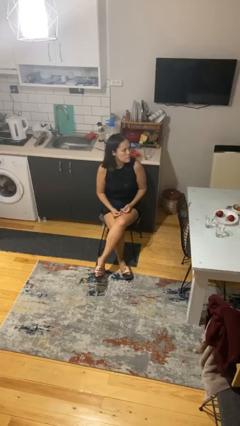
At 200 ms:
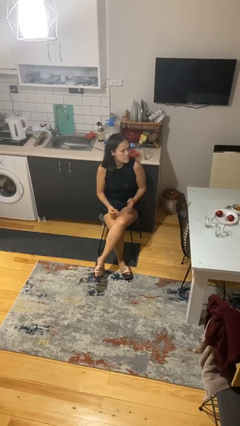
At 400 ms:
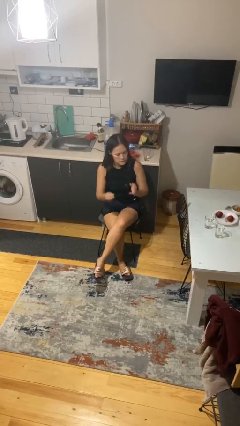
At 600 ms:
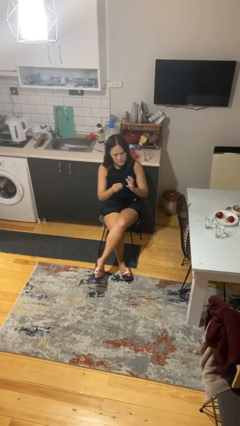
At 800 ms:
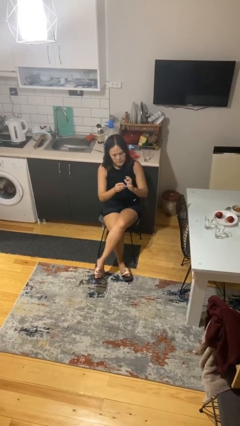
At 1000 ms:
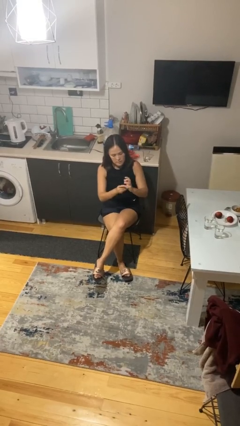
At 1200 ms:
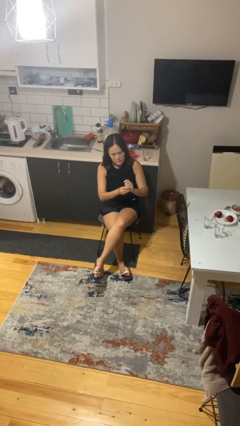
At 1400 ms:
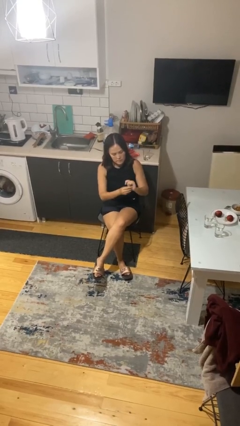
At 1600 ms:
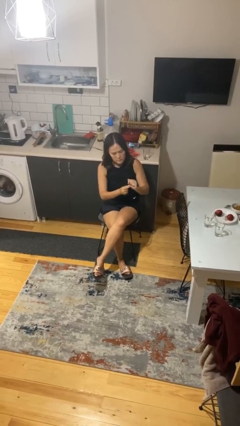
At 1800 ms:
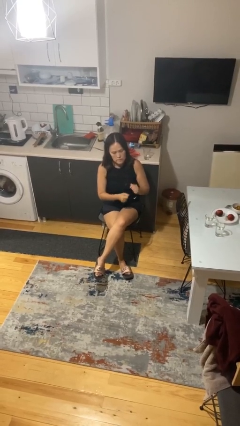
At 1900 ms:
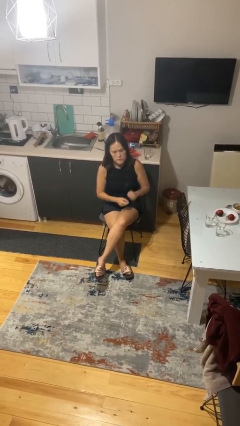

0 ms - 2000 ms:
person puts on ring

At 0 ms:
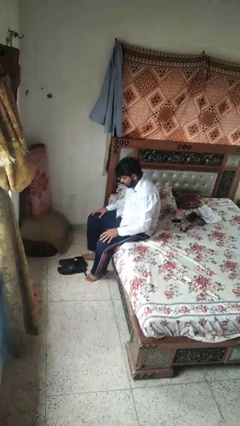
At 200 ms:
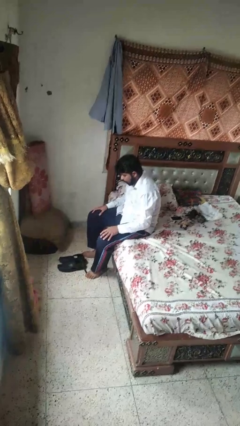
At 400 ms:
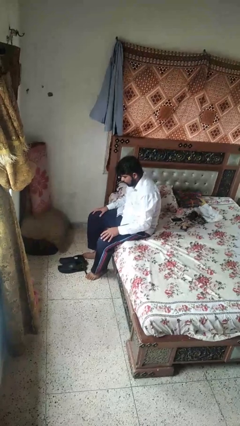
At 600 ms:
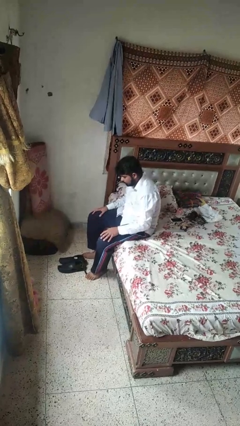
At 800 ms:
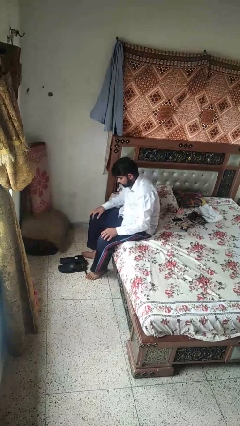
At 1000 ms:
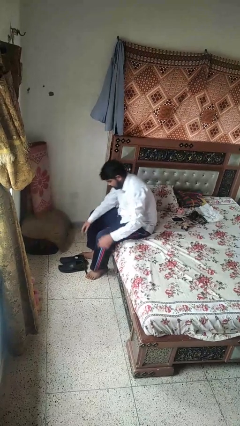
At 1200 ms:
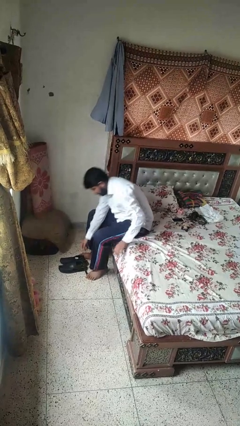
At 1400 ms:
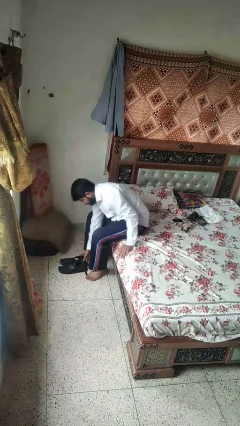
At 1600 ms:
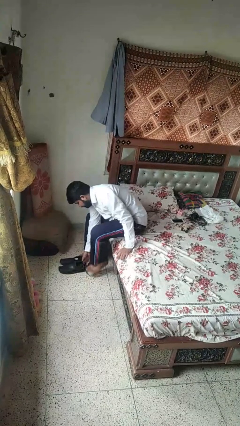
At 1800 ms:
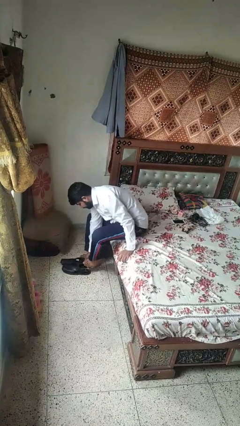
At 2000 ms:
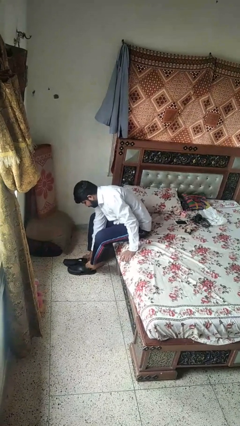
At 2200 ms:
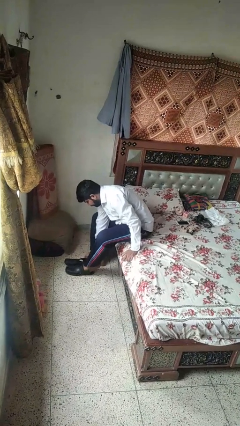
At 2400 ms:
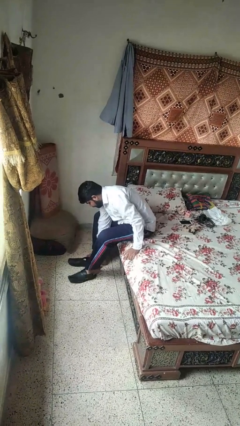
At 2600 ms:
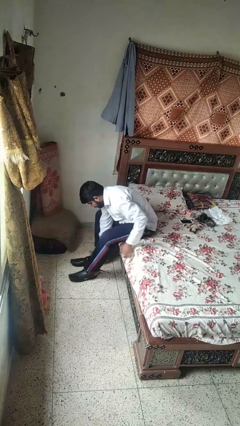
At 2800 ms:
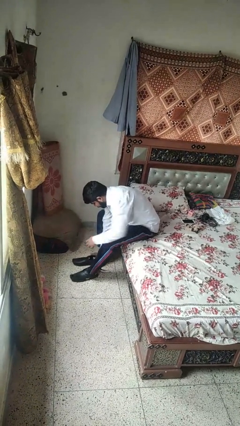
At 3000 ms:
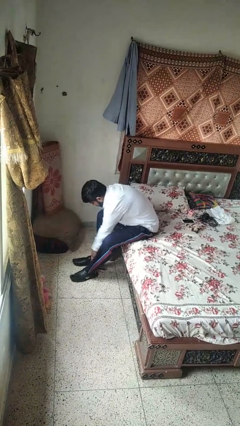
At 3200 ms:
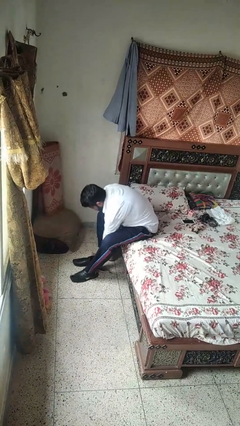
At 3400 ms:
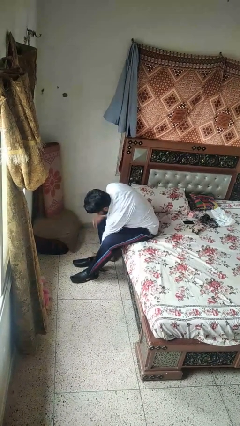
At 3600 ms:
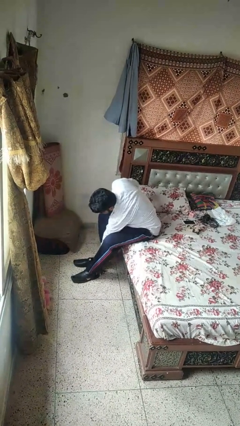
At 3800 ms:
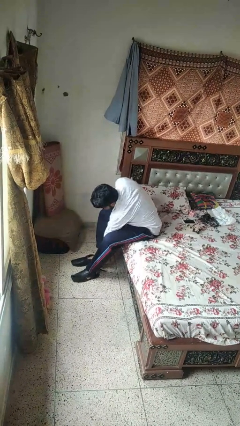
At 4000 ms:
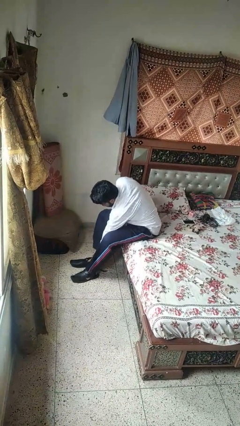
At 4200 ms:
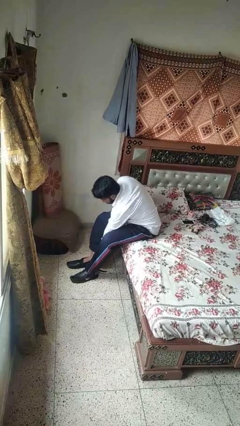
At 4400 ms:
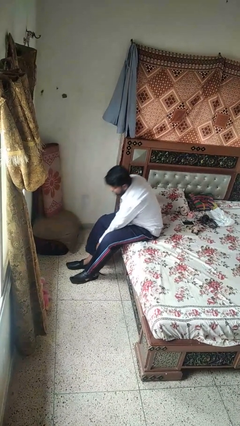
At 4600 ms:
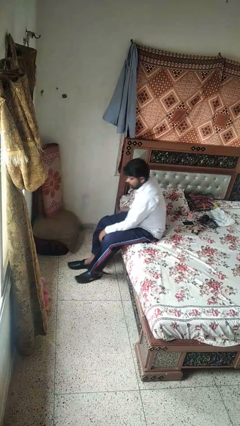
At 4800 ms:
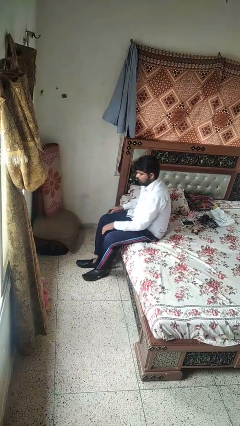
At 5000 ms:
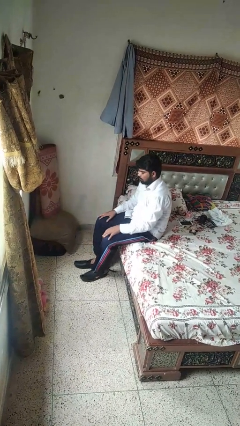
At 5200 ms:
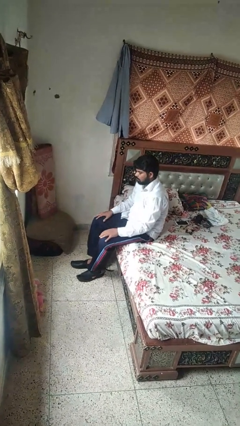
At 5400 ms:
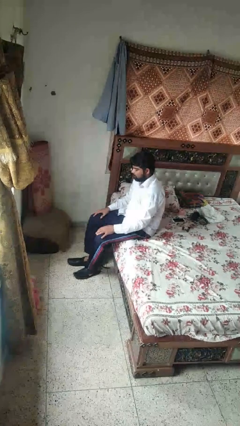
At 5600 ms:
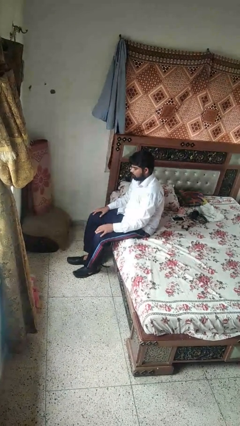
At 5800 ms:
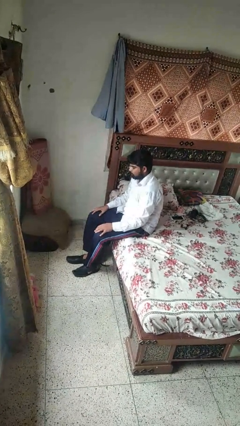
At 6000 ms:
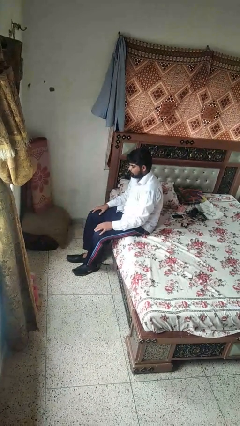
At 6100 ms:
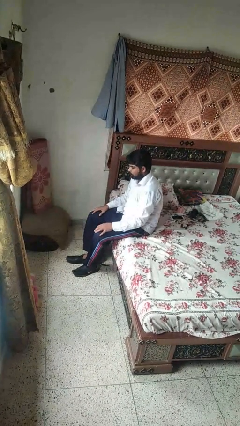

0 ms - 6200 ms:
person puts on shoes

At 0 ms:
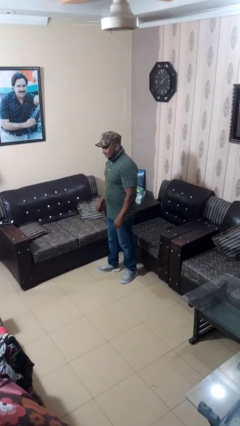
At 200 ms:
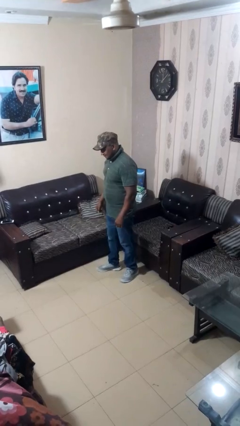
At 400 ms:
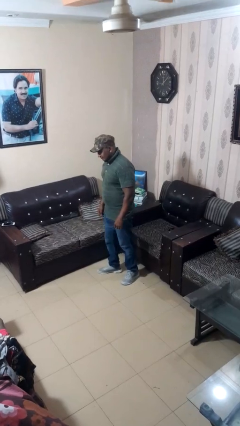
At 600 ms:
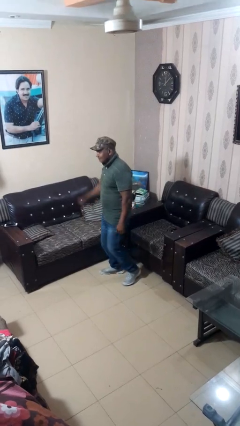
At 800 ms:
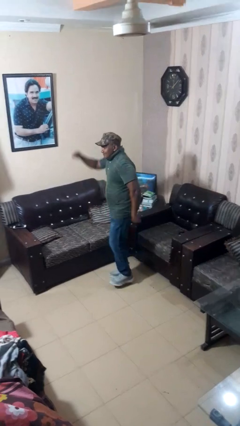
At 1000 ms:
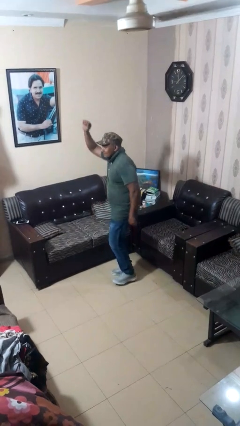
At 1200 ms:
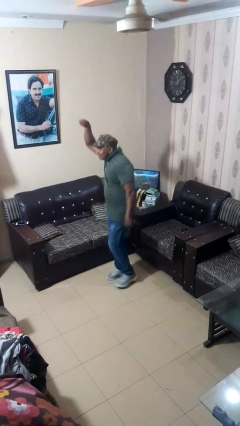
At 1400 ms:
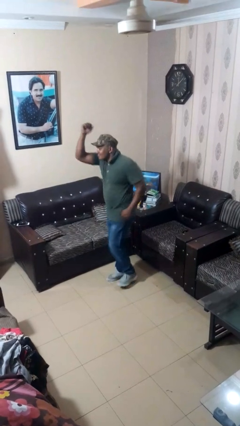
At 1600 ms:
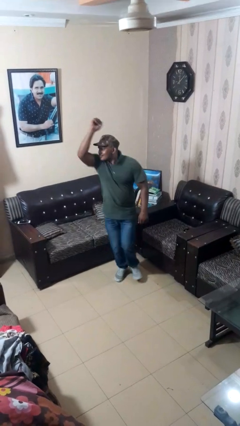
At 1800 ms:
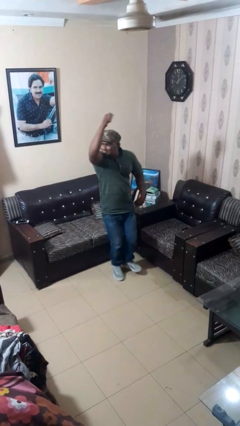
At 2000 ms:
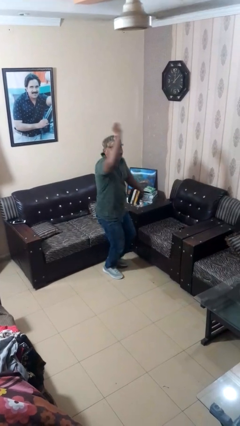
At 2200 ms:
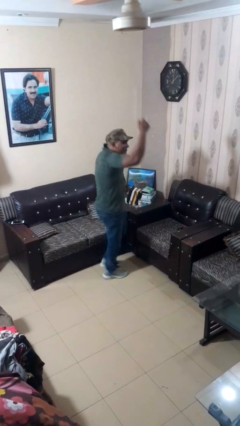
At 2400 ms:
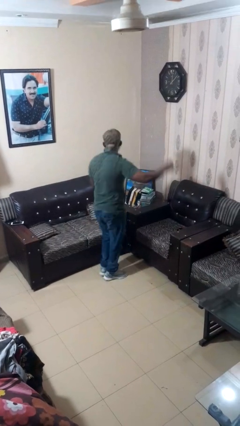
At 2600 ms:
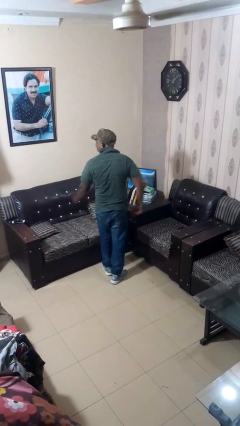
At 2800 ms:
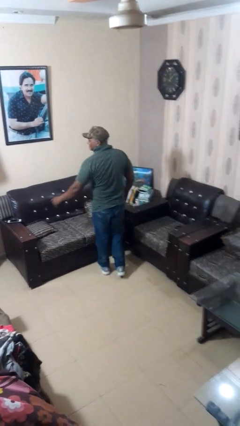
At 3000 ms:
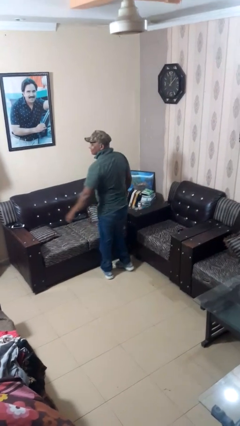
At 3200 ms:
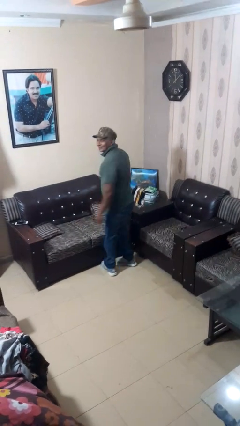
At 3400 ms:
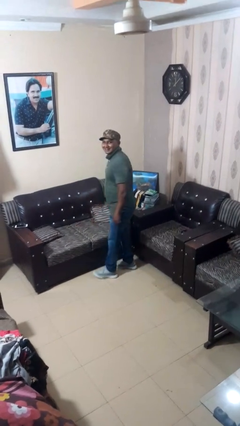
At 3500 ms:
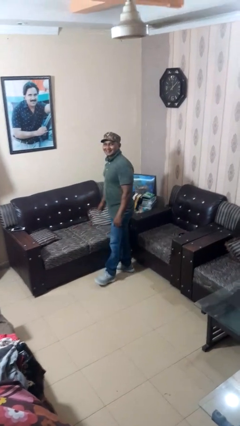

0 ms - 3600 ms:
person dances in place

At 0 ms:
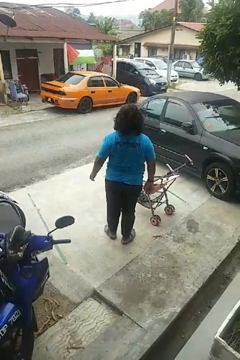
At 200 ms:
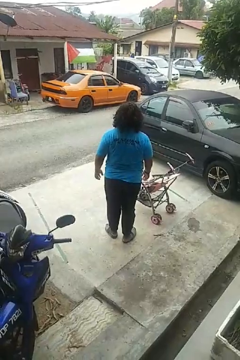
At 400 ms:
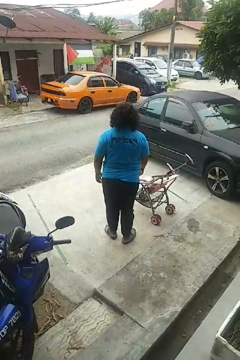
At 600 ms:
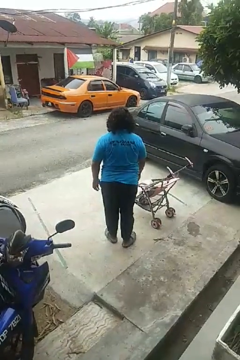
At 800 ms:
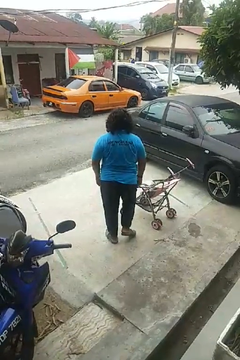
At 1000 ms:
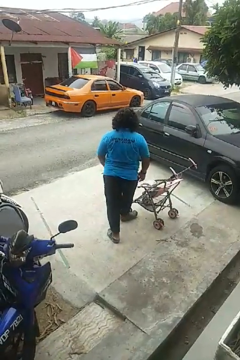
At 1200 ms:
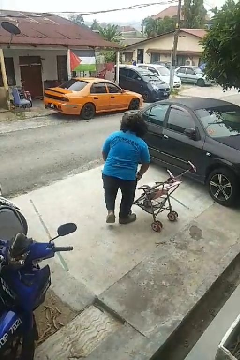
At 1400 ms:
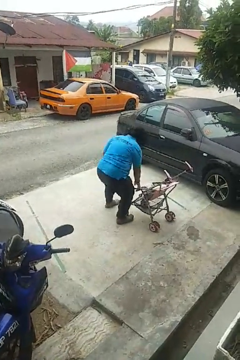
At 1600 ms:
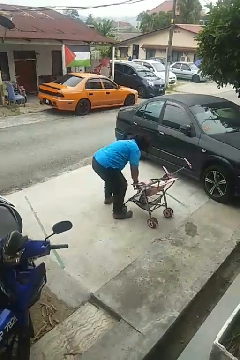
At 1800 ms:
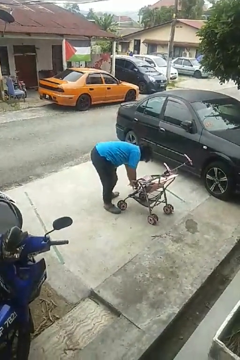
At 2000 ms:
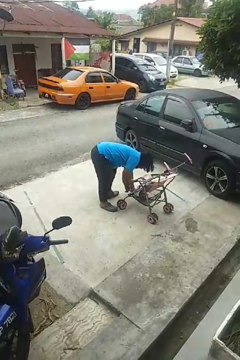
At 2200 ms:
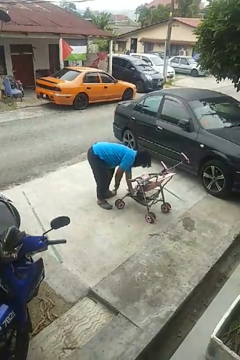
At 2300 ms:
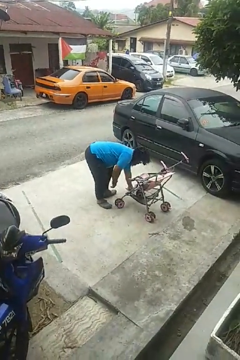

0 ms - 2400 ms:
person trips on object on floor

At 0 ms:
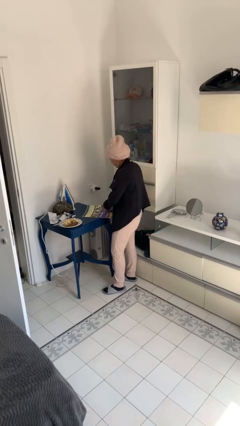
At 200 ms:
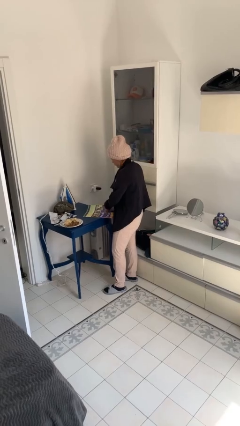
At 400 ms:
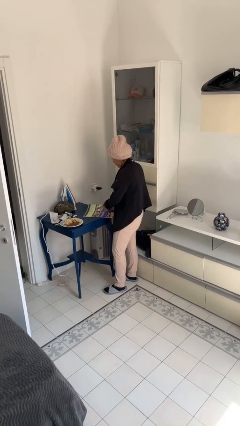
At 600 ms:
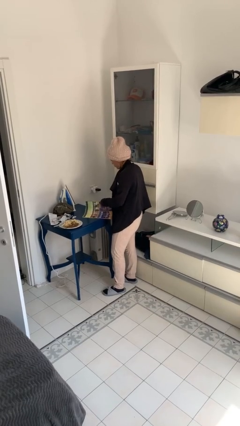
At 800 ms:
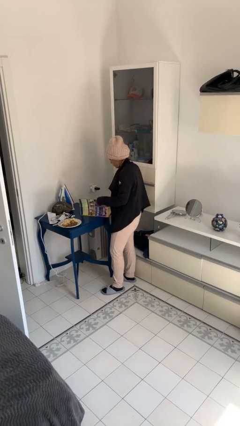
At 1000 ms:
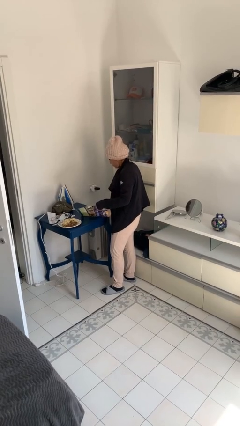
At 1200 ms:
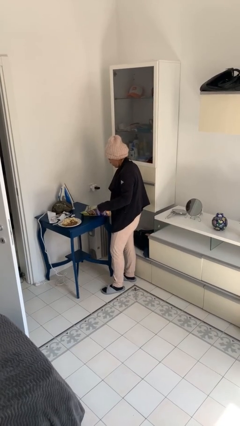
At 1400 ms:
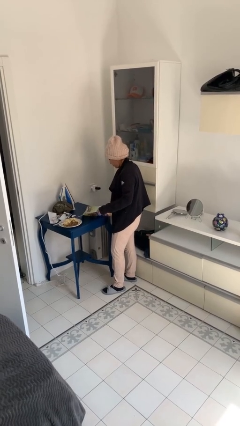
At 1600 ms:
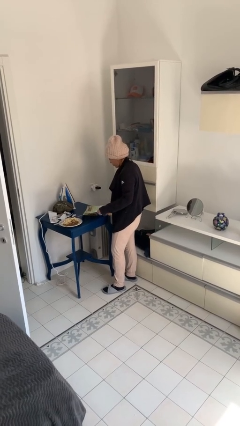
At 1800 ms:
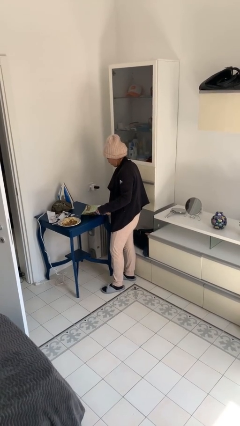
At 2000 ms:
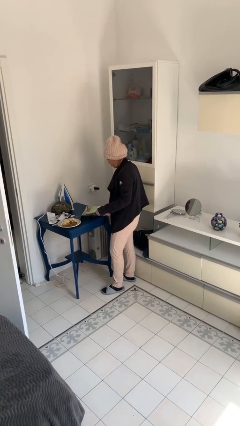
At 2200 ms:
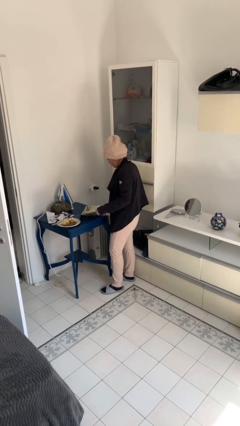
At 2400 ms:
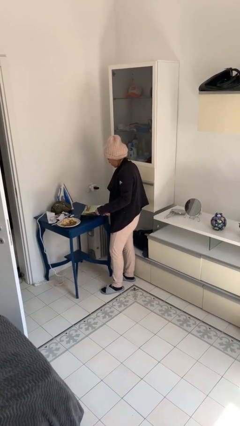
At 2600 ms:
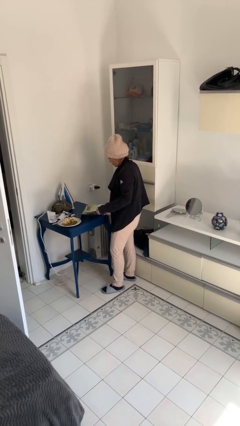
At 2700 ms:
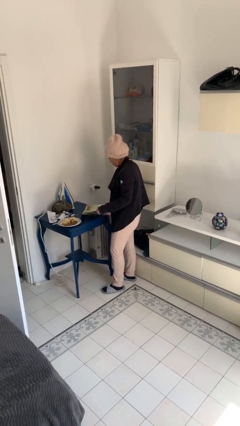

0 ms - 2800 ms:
person reads magazine

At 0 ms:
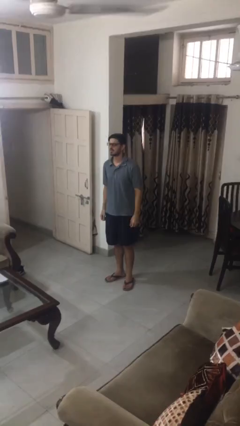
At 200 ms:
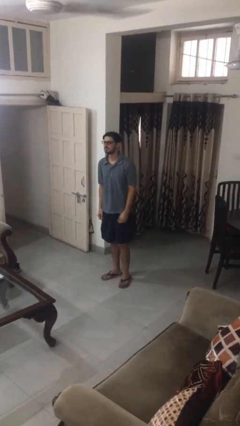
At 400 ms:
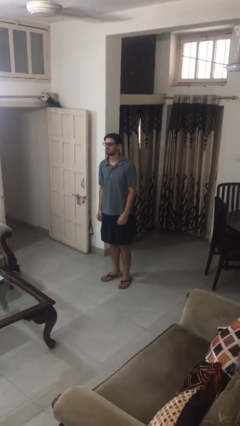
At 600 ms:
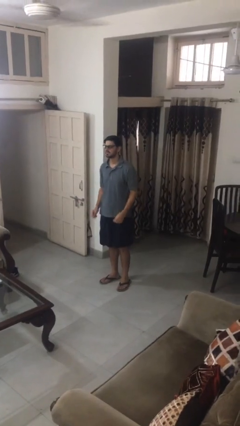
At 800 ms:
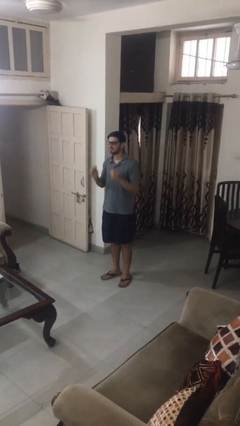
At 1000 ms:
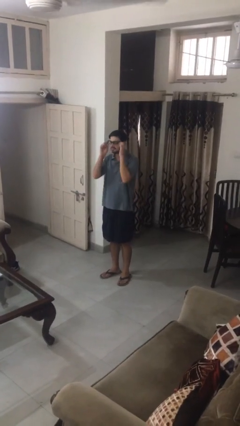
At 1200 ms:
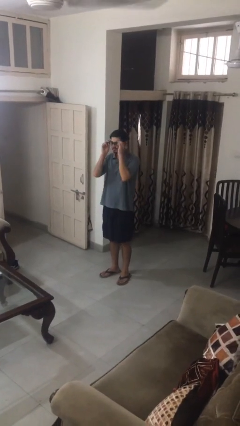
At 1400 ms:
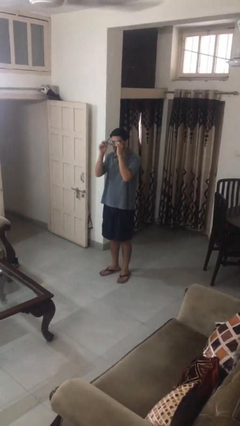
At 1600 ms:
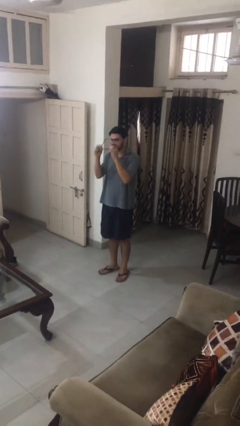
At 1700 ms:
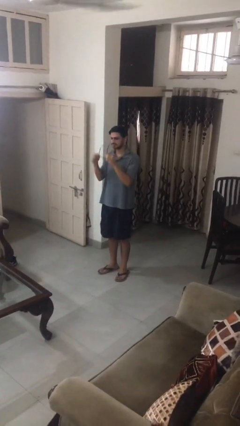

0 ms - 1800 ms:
person takes off glasses
